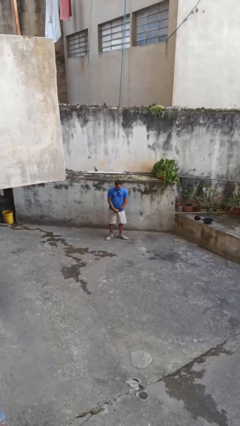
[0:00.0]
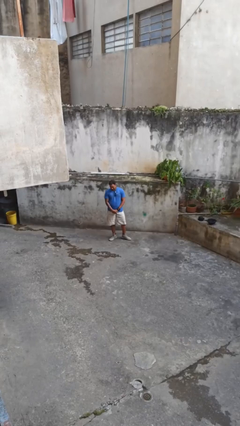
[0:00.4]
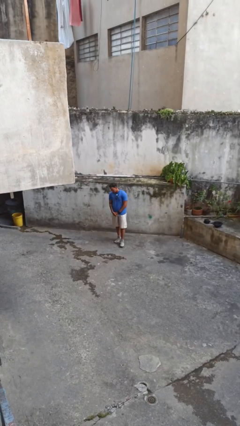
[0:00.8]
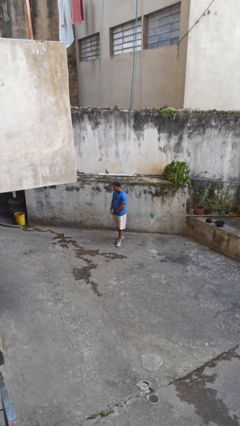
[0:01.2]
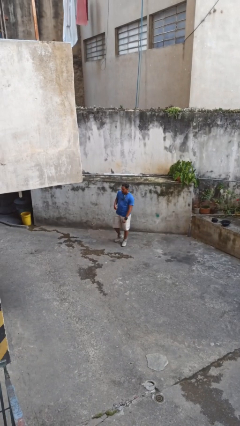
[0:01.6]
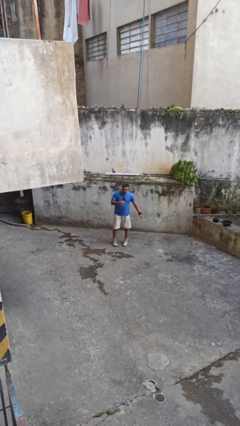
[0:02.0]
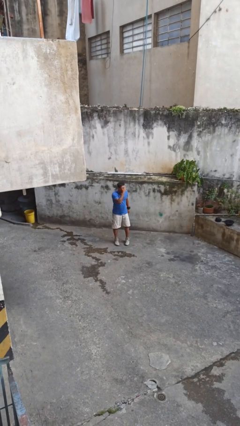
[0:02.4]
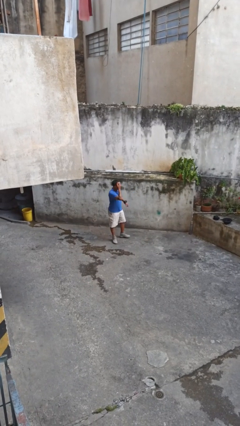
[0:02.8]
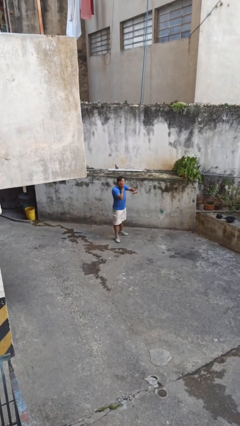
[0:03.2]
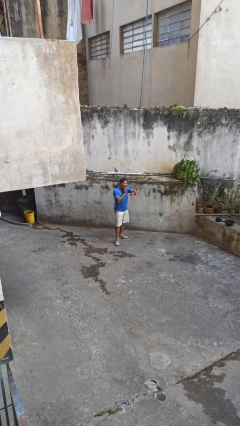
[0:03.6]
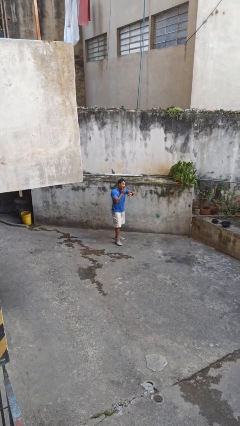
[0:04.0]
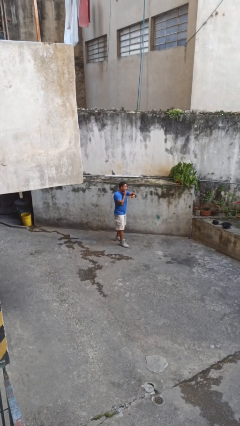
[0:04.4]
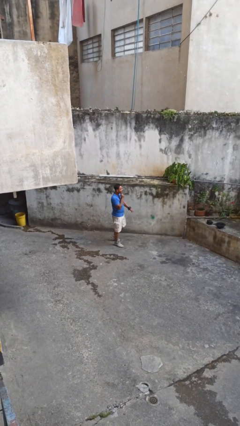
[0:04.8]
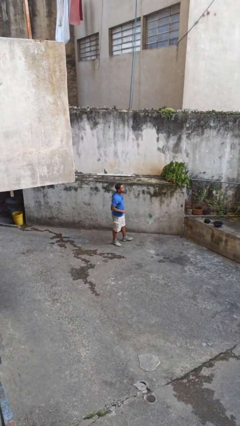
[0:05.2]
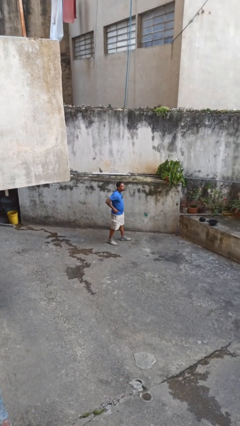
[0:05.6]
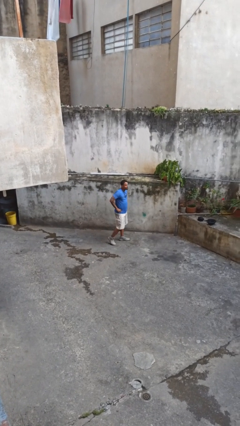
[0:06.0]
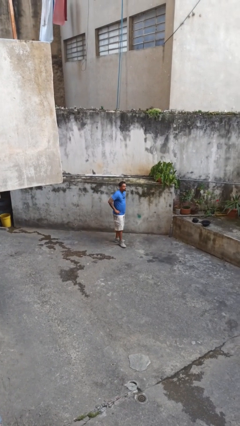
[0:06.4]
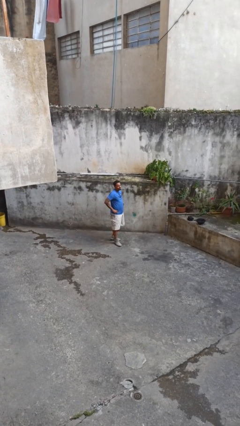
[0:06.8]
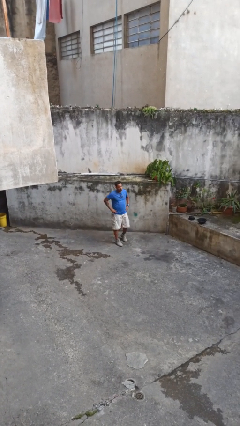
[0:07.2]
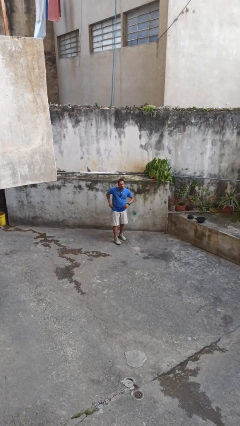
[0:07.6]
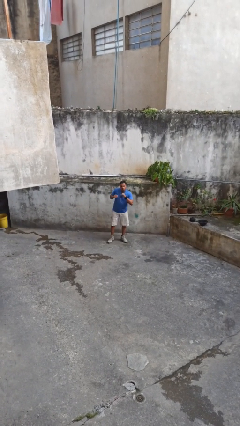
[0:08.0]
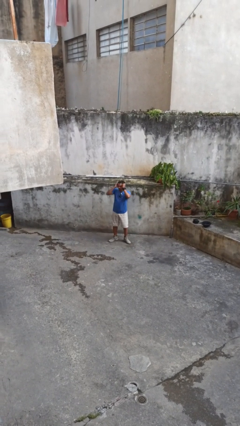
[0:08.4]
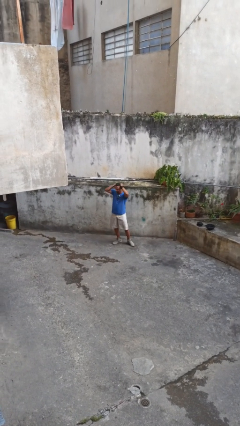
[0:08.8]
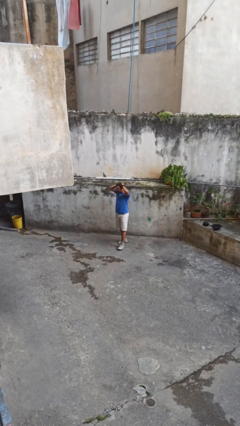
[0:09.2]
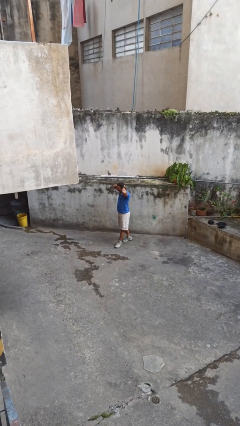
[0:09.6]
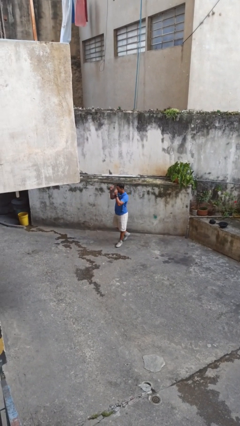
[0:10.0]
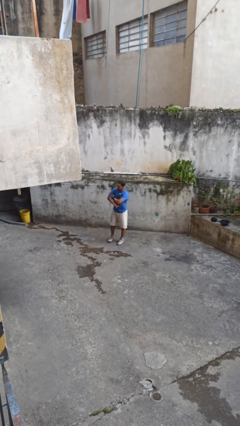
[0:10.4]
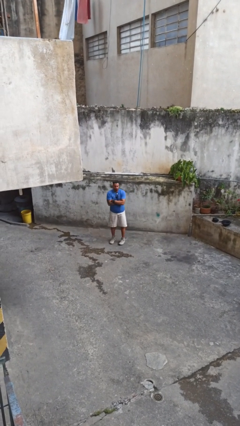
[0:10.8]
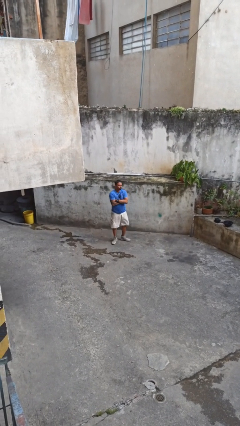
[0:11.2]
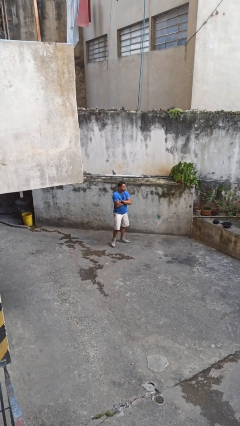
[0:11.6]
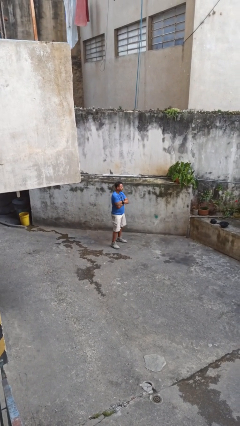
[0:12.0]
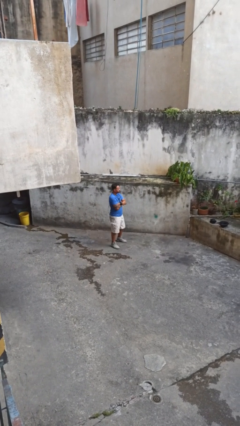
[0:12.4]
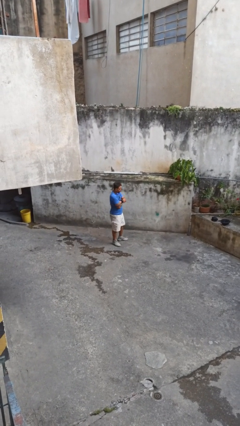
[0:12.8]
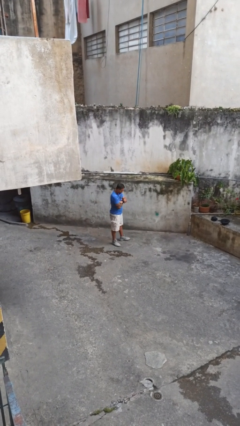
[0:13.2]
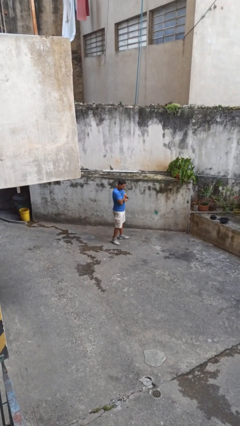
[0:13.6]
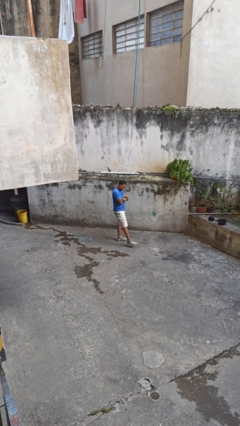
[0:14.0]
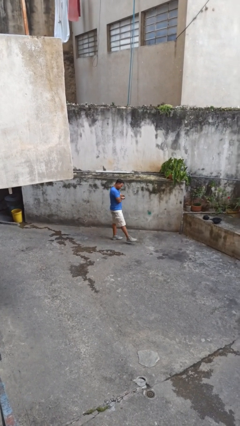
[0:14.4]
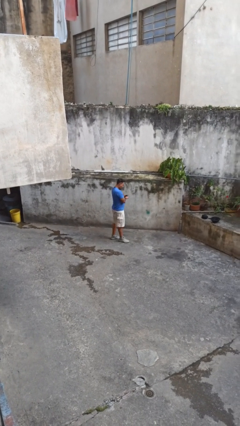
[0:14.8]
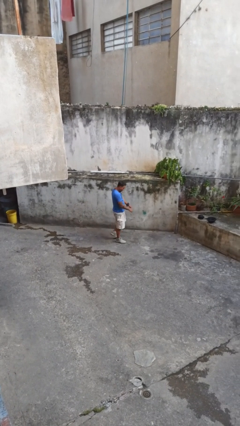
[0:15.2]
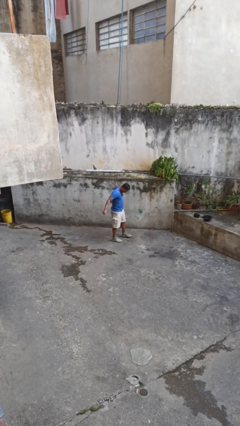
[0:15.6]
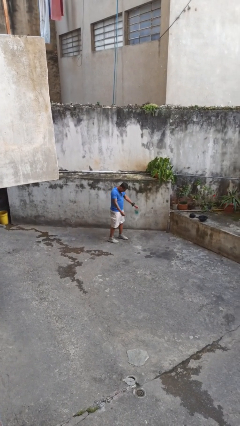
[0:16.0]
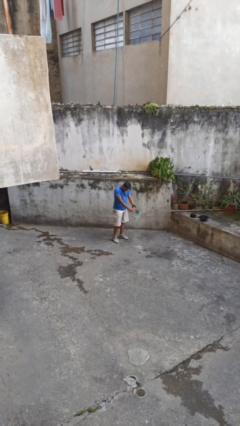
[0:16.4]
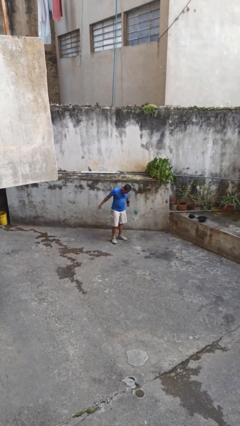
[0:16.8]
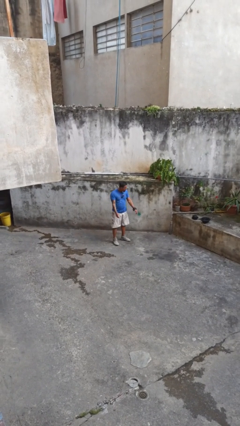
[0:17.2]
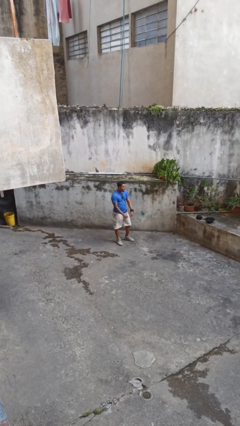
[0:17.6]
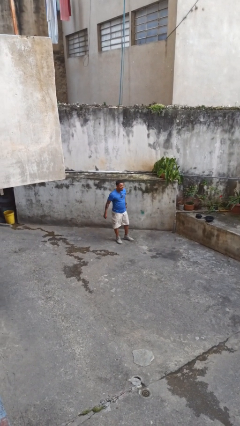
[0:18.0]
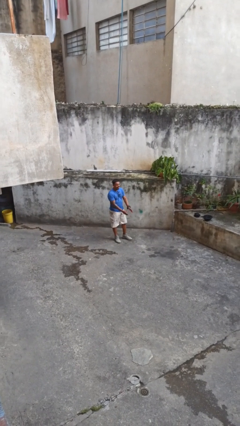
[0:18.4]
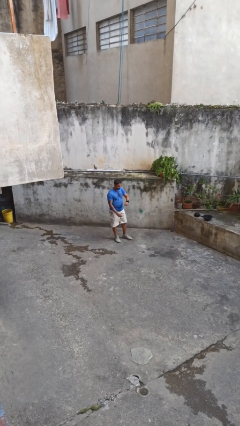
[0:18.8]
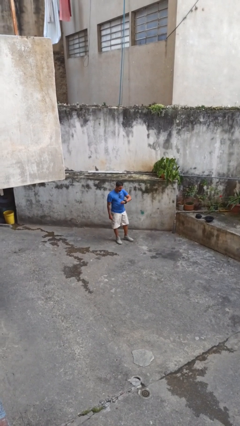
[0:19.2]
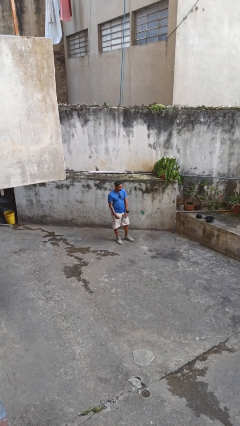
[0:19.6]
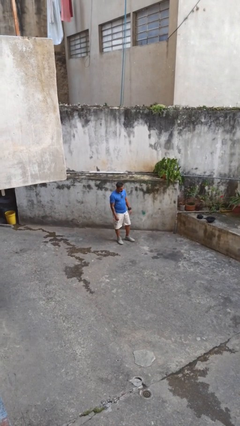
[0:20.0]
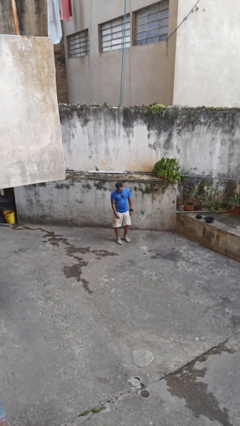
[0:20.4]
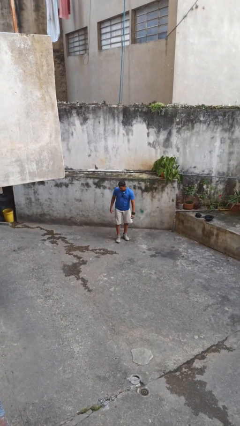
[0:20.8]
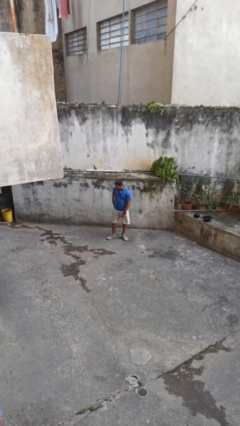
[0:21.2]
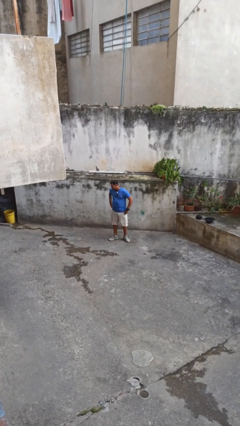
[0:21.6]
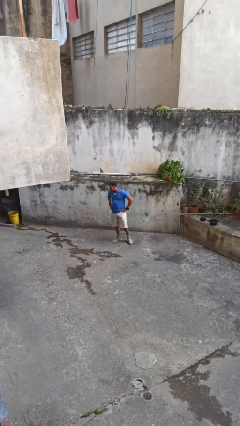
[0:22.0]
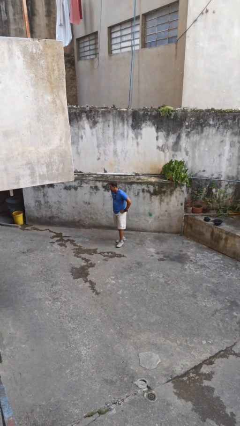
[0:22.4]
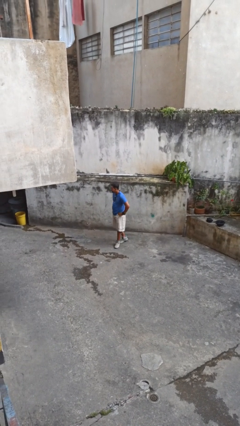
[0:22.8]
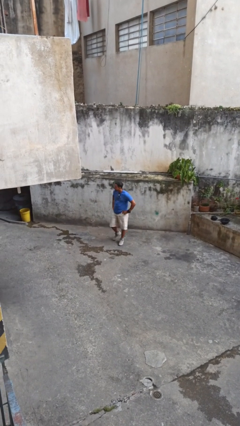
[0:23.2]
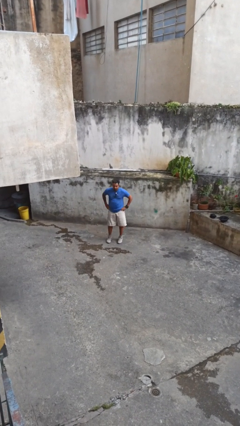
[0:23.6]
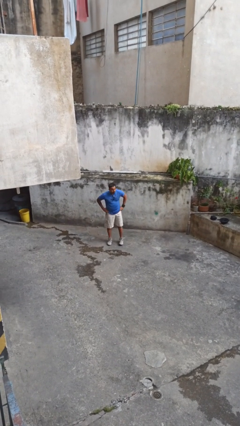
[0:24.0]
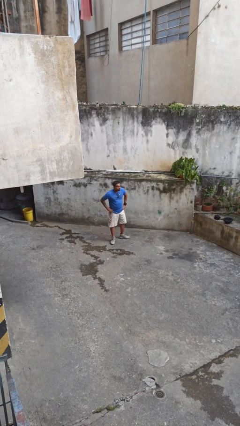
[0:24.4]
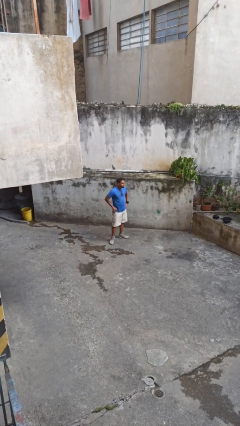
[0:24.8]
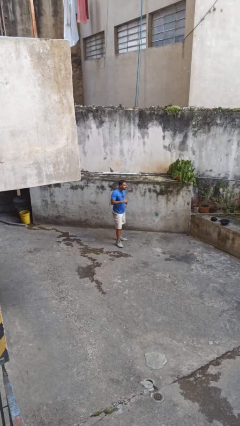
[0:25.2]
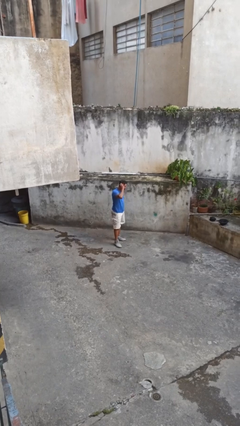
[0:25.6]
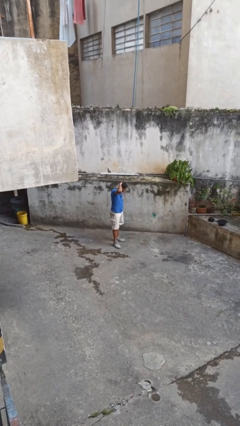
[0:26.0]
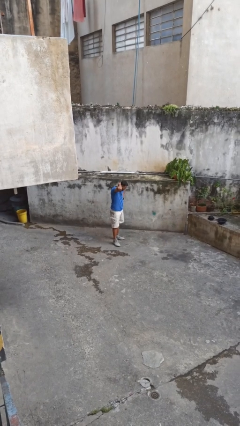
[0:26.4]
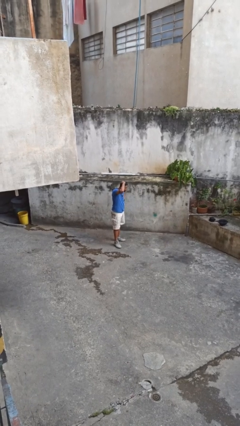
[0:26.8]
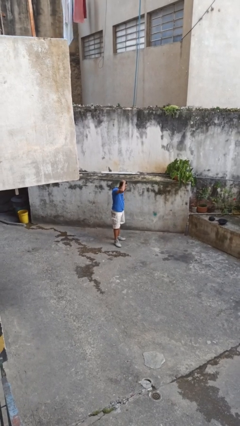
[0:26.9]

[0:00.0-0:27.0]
person walks

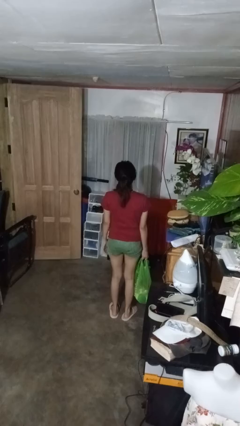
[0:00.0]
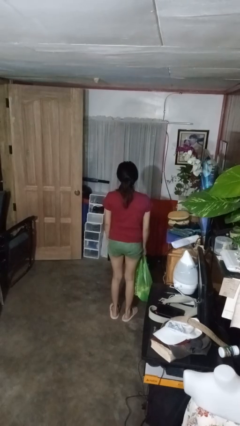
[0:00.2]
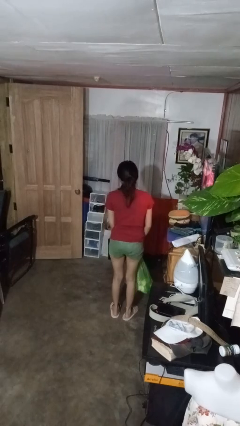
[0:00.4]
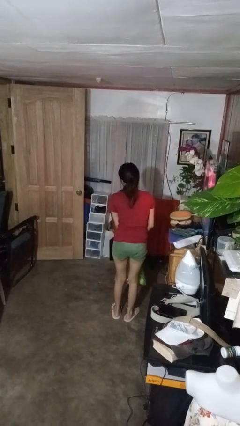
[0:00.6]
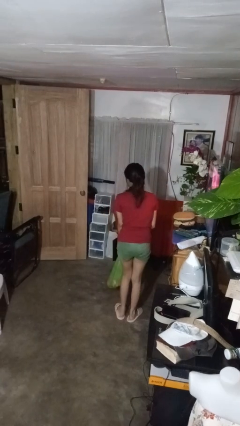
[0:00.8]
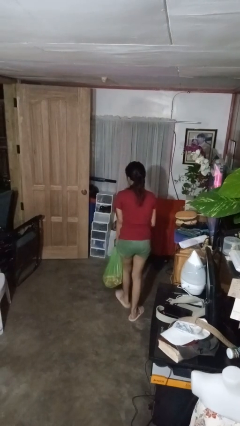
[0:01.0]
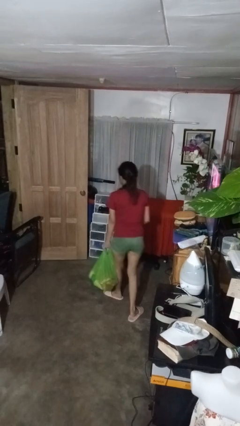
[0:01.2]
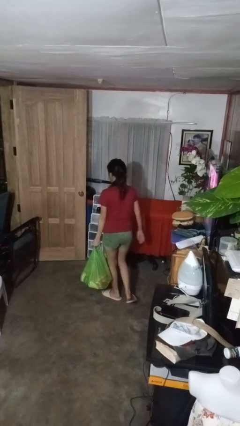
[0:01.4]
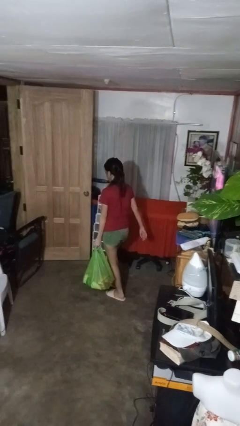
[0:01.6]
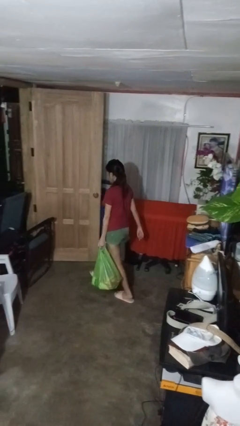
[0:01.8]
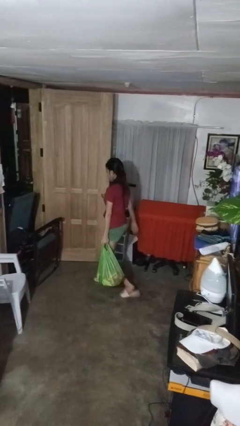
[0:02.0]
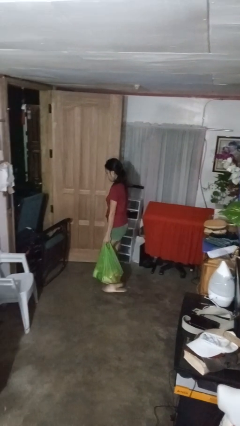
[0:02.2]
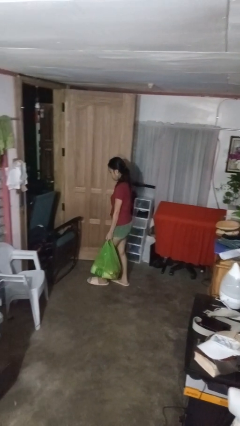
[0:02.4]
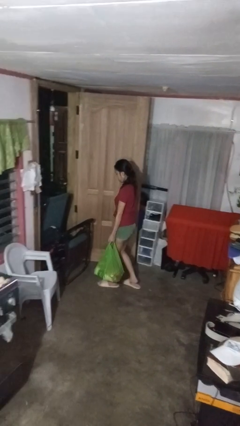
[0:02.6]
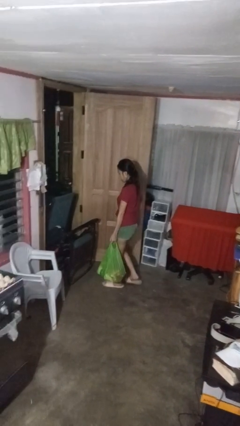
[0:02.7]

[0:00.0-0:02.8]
person carries groceries

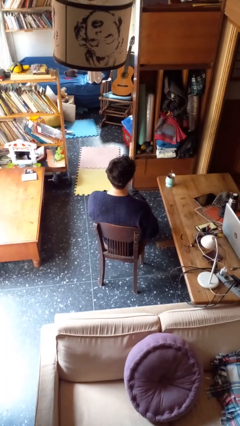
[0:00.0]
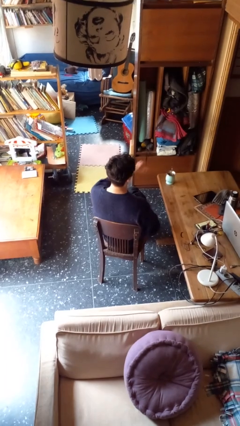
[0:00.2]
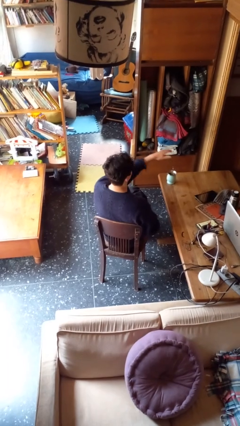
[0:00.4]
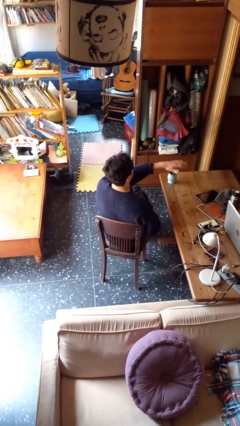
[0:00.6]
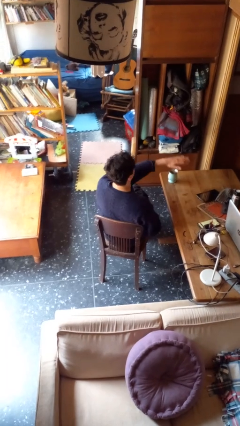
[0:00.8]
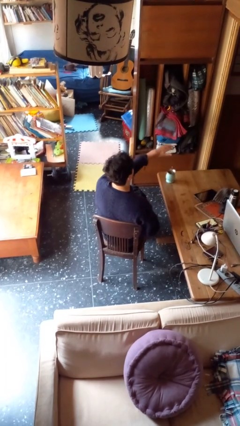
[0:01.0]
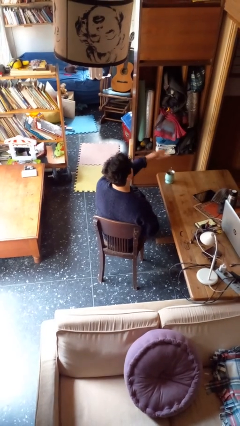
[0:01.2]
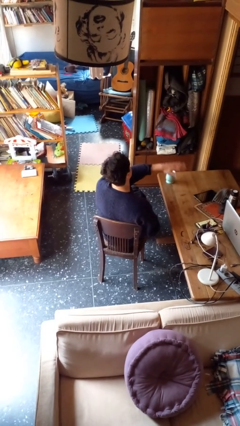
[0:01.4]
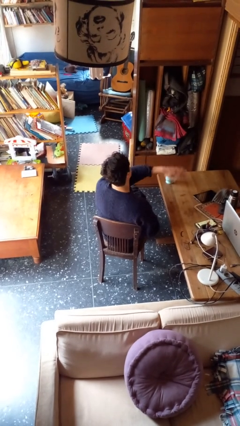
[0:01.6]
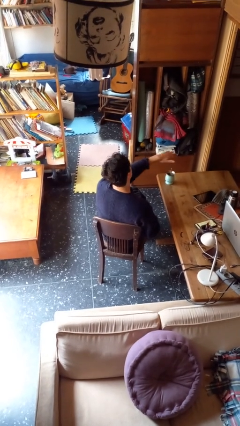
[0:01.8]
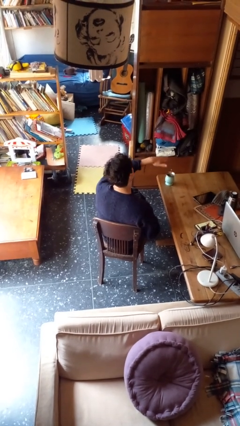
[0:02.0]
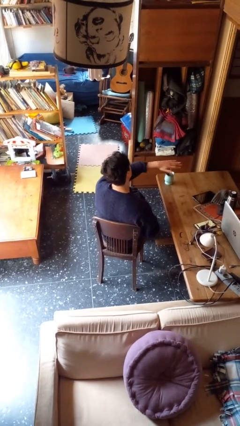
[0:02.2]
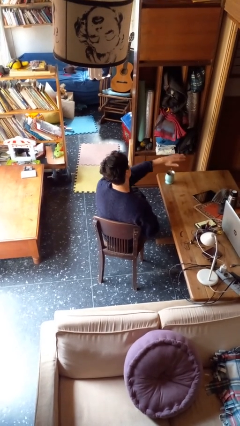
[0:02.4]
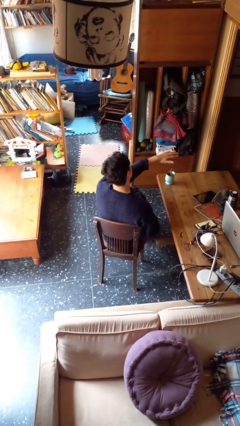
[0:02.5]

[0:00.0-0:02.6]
person waves hand over object
